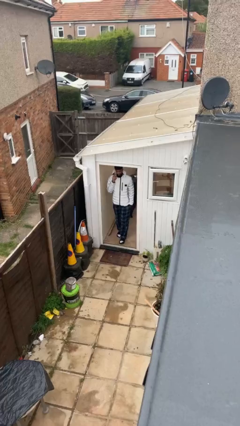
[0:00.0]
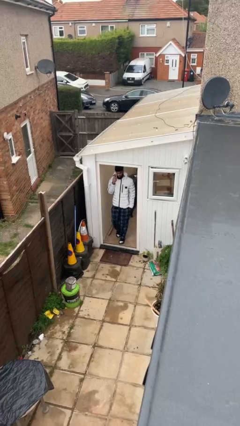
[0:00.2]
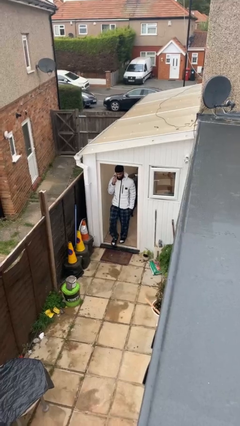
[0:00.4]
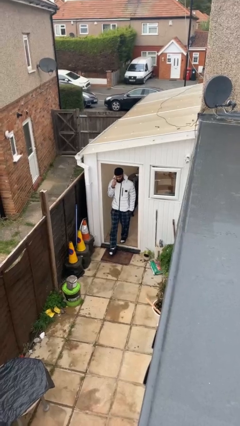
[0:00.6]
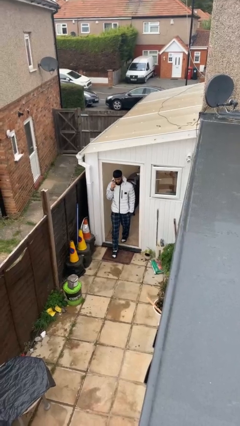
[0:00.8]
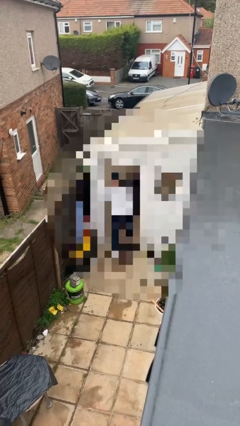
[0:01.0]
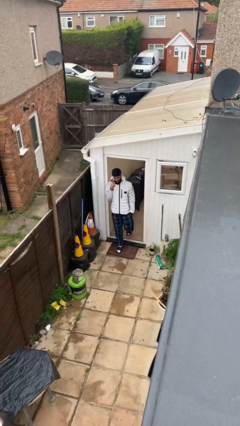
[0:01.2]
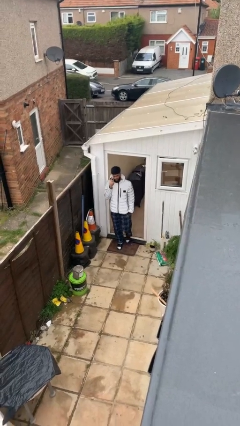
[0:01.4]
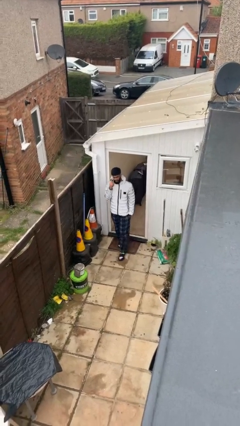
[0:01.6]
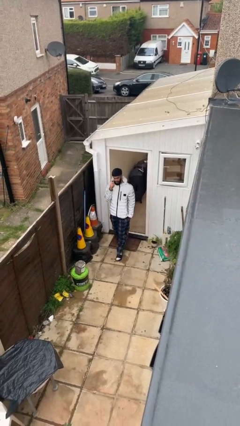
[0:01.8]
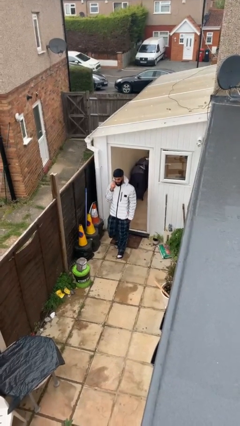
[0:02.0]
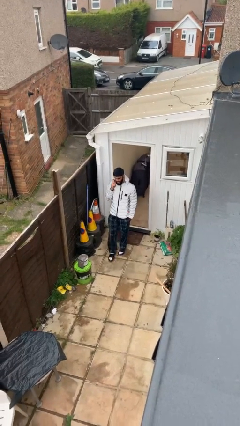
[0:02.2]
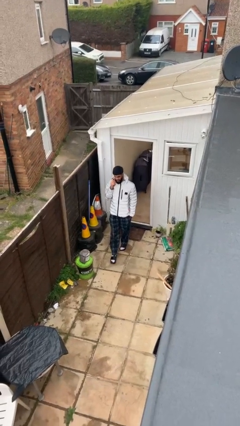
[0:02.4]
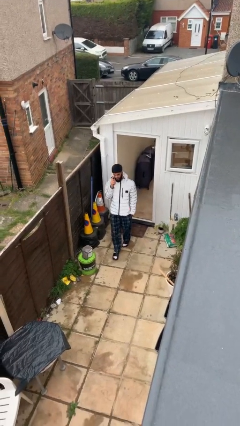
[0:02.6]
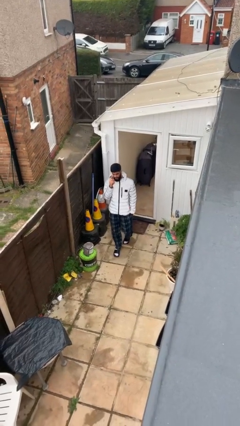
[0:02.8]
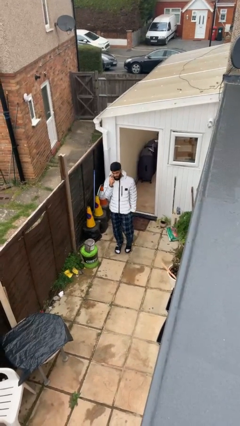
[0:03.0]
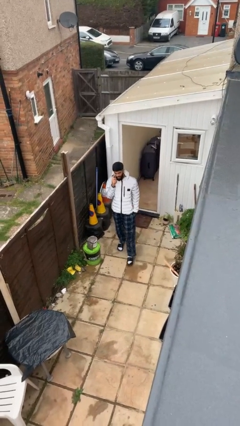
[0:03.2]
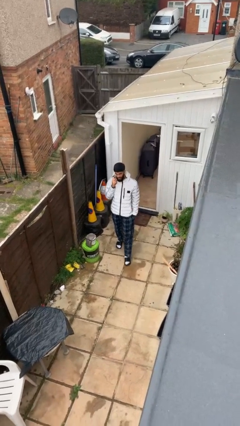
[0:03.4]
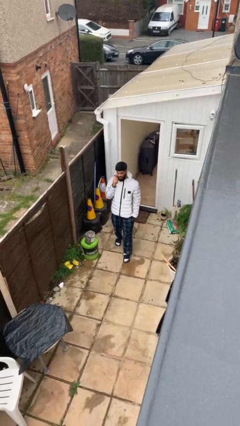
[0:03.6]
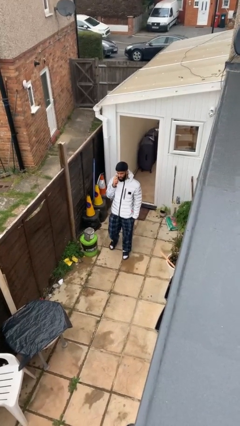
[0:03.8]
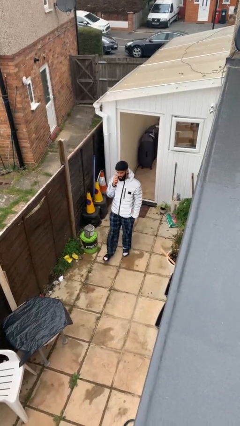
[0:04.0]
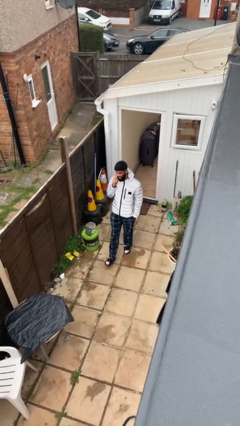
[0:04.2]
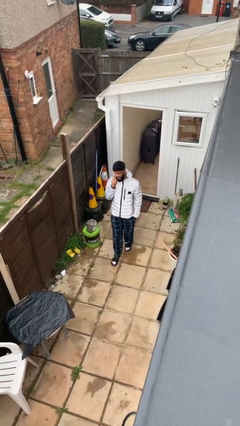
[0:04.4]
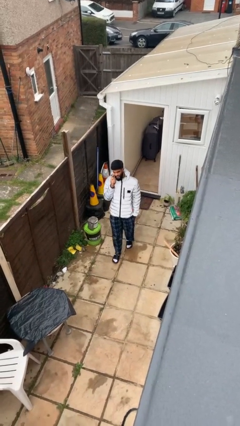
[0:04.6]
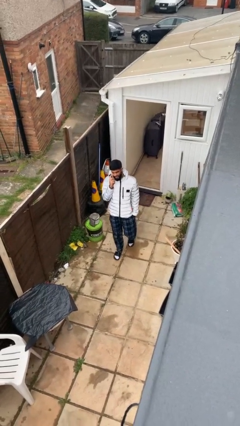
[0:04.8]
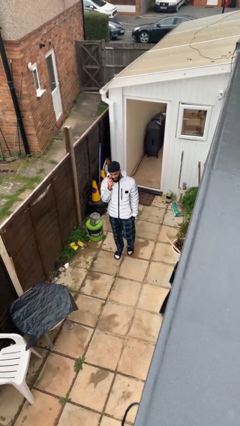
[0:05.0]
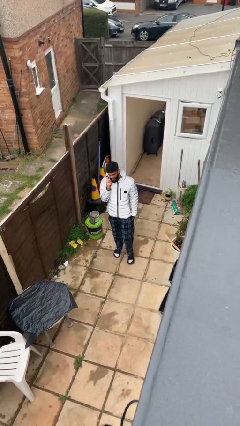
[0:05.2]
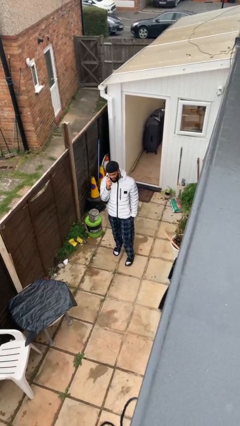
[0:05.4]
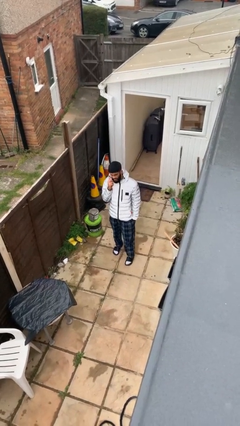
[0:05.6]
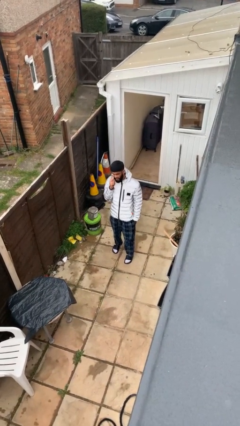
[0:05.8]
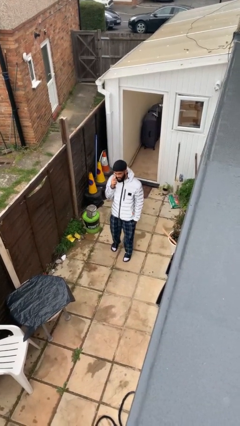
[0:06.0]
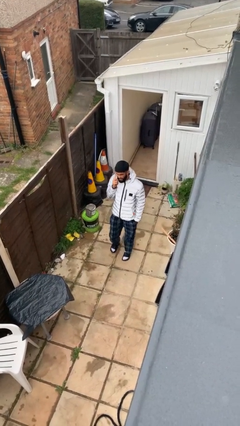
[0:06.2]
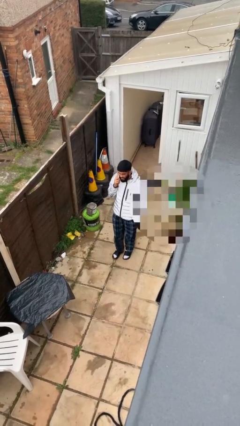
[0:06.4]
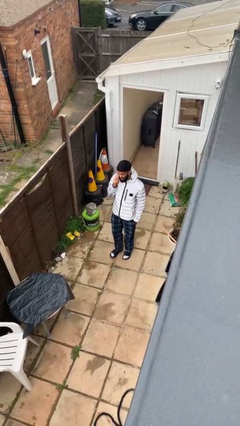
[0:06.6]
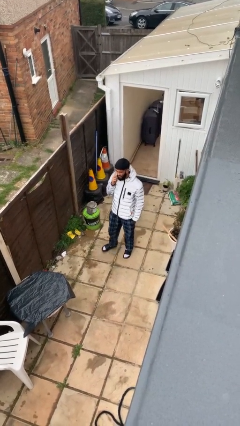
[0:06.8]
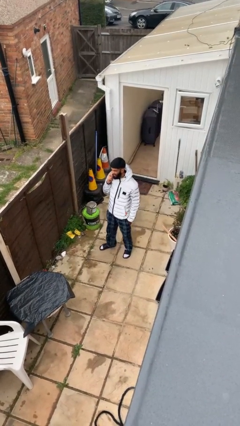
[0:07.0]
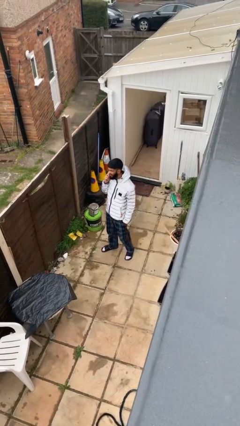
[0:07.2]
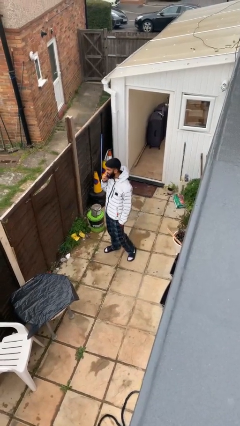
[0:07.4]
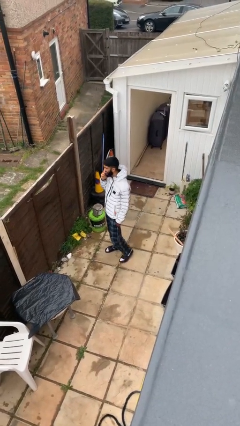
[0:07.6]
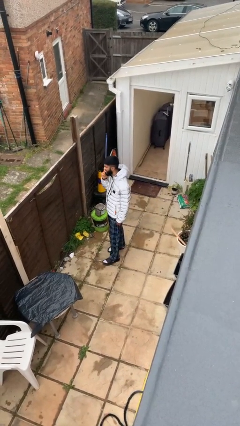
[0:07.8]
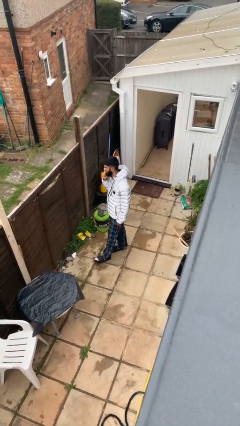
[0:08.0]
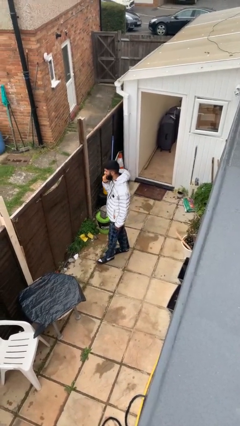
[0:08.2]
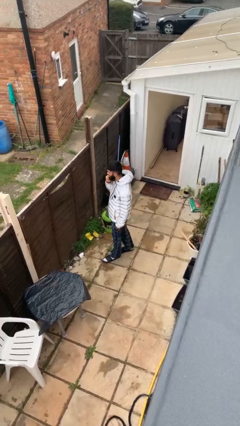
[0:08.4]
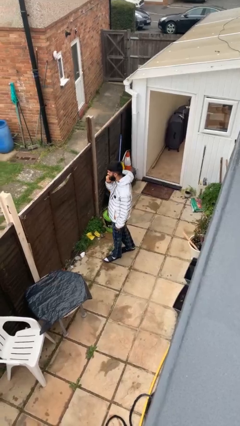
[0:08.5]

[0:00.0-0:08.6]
person enters scene through structure

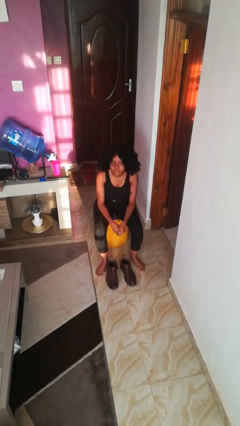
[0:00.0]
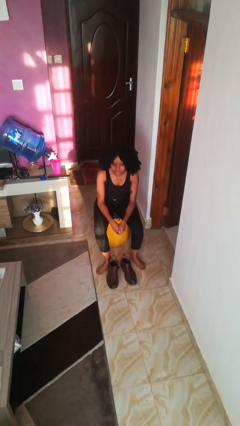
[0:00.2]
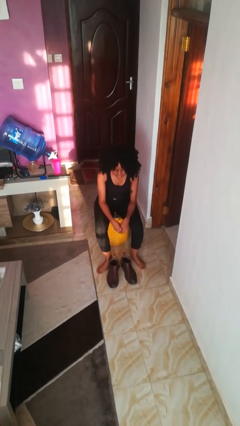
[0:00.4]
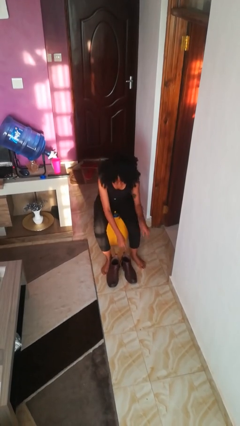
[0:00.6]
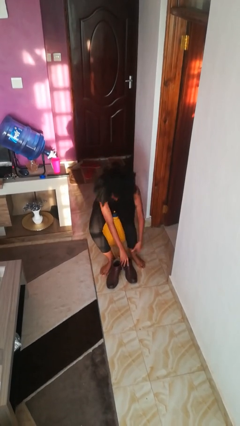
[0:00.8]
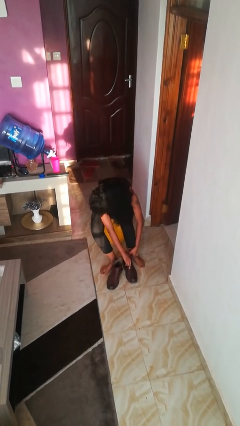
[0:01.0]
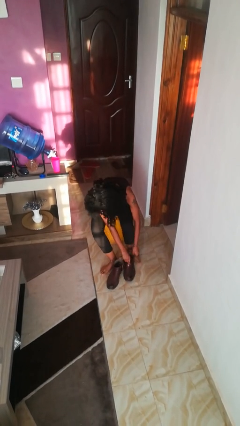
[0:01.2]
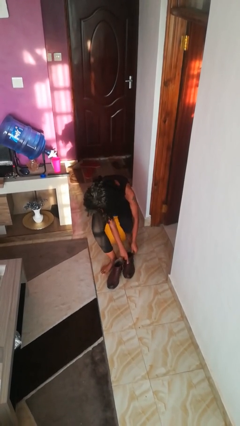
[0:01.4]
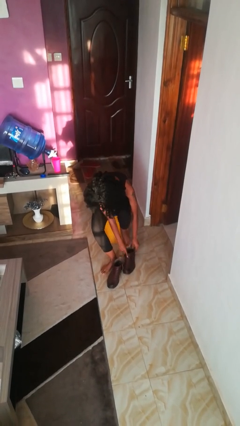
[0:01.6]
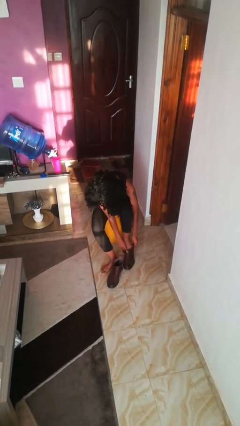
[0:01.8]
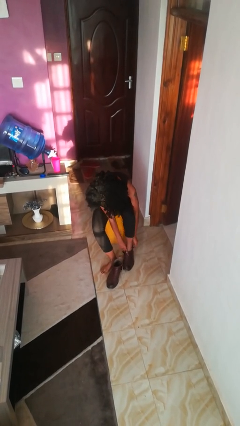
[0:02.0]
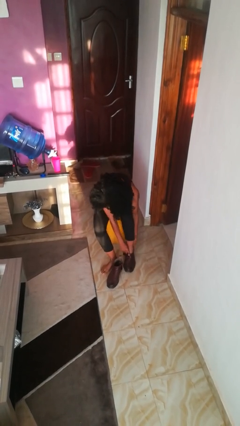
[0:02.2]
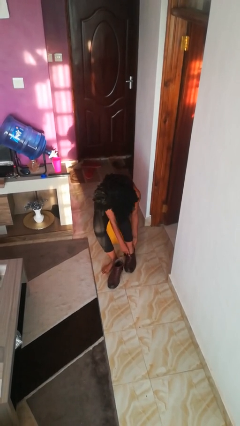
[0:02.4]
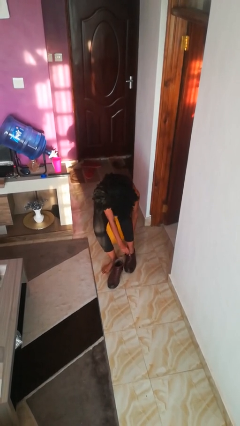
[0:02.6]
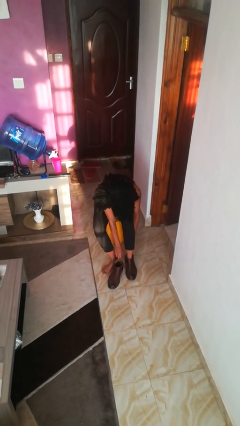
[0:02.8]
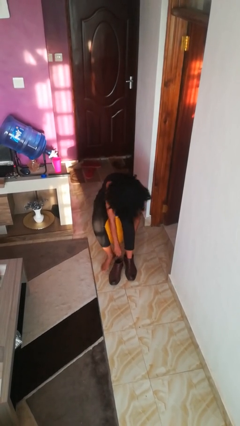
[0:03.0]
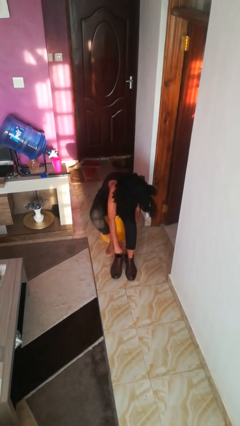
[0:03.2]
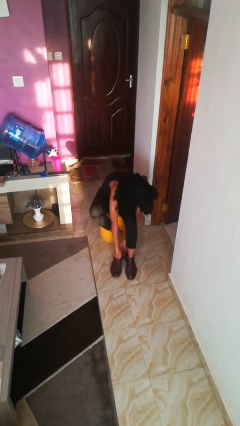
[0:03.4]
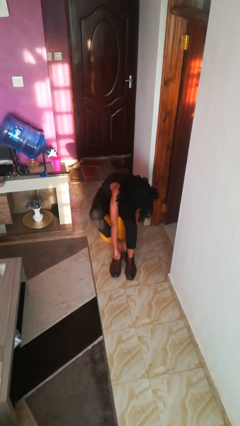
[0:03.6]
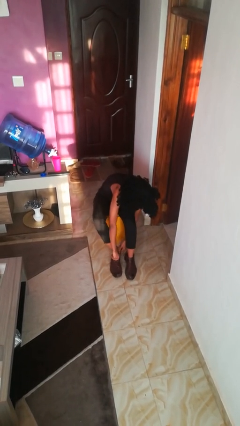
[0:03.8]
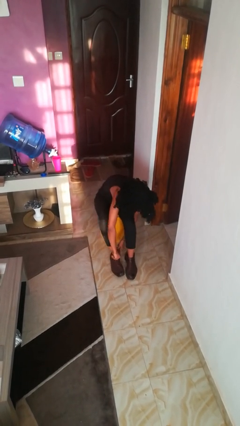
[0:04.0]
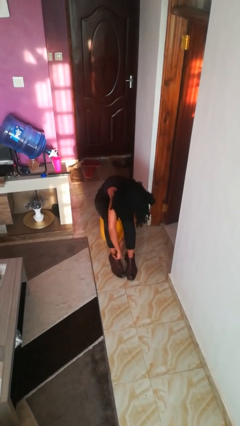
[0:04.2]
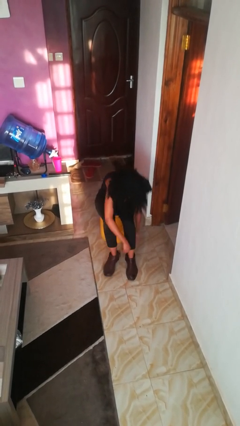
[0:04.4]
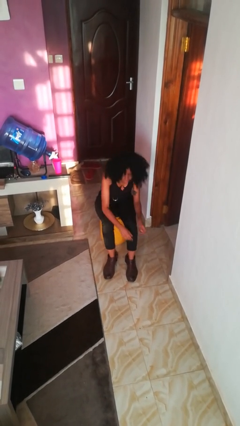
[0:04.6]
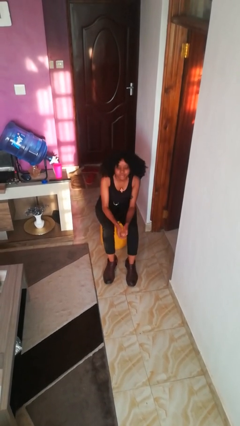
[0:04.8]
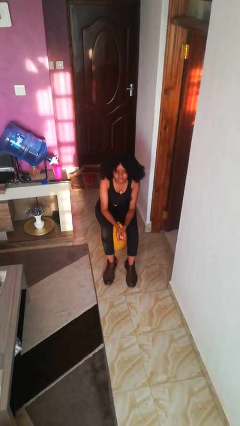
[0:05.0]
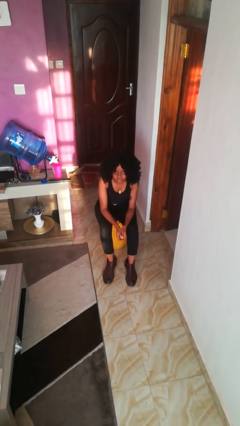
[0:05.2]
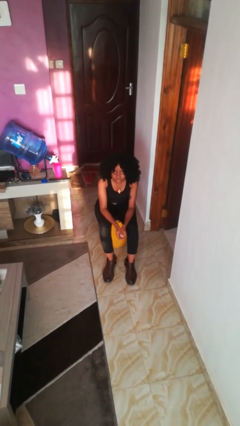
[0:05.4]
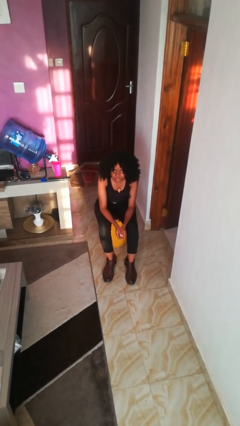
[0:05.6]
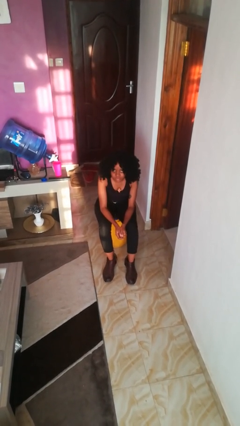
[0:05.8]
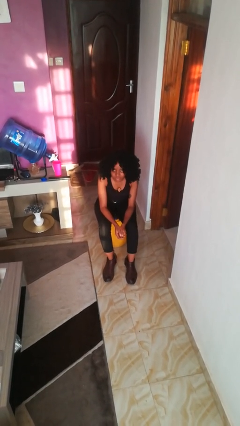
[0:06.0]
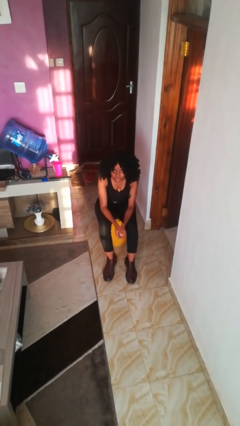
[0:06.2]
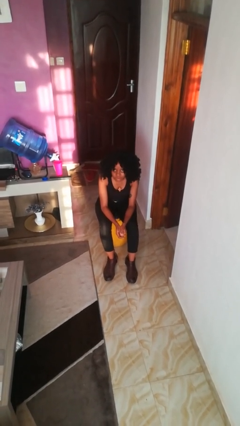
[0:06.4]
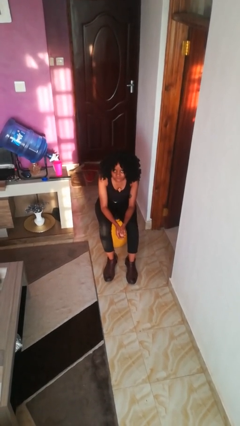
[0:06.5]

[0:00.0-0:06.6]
person puts on boots

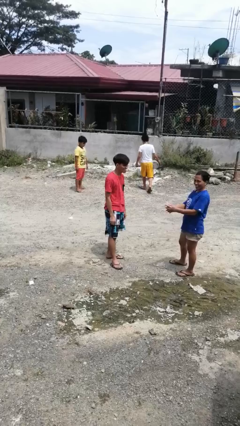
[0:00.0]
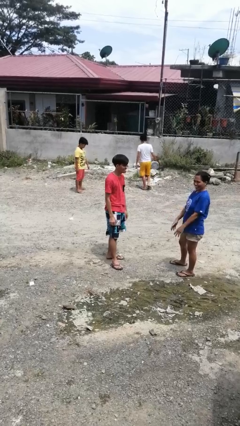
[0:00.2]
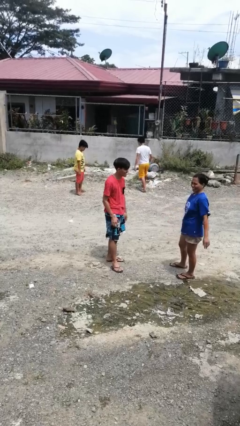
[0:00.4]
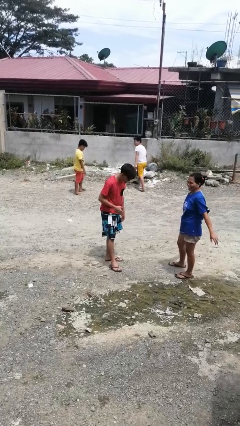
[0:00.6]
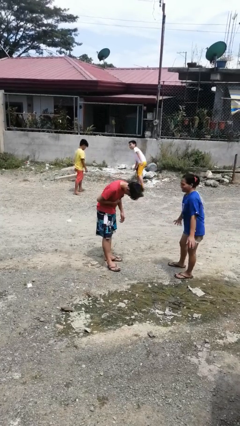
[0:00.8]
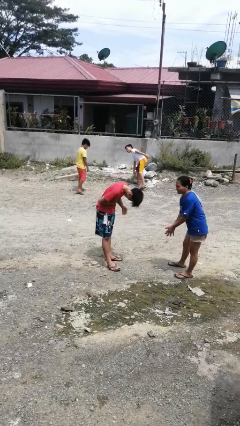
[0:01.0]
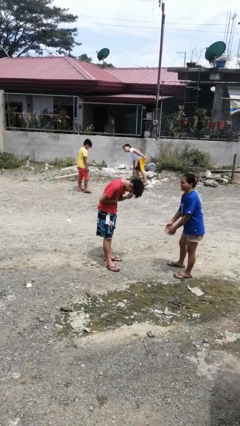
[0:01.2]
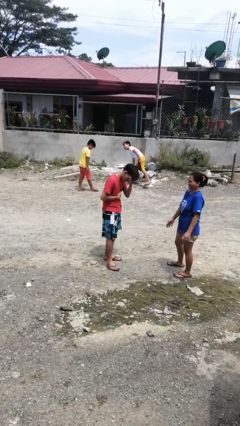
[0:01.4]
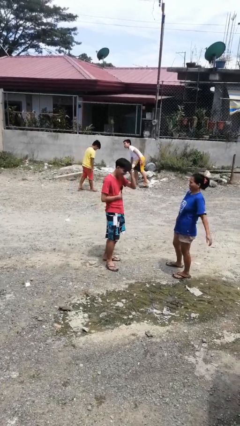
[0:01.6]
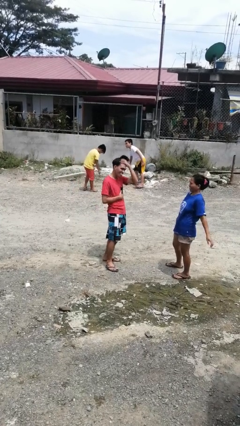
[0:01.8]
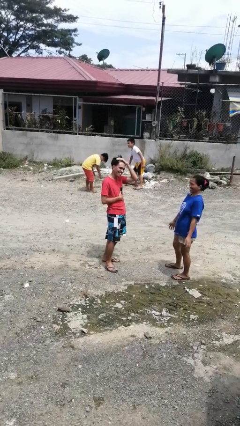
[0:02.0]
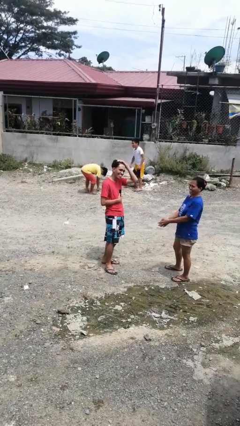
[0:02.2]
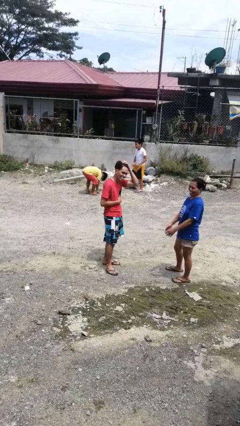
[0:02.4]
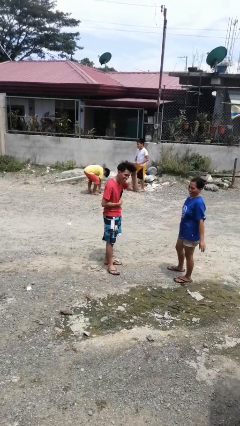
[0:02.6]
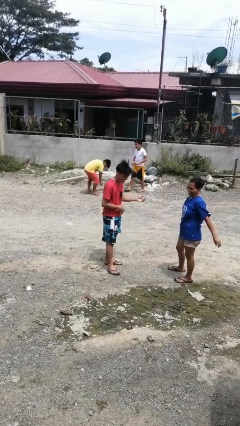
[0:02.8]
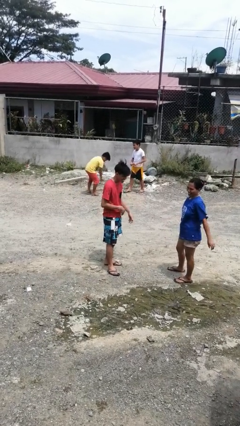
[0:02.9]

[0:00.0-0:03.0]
person laughs with person
